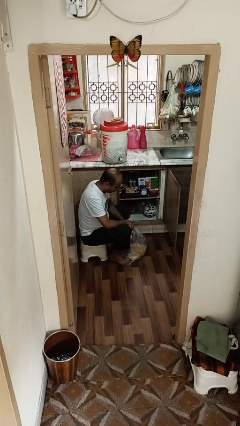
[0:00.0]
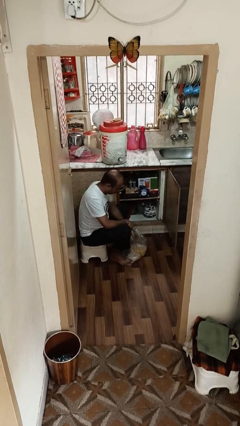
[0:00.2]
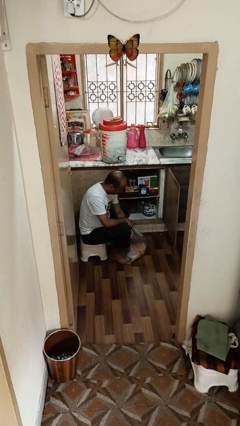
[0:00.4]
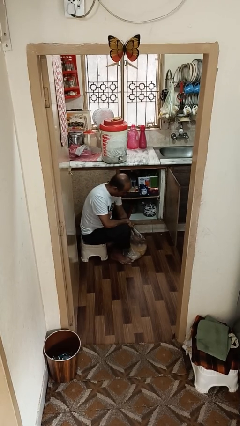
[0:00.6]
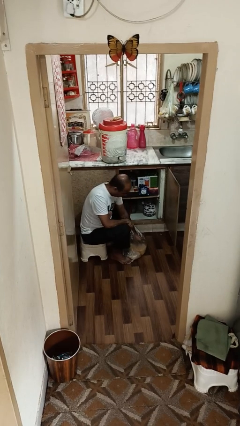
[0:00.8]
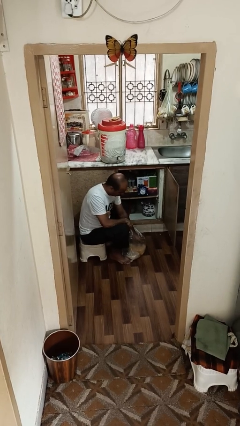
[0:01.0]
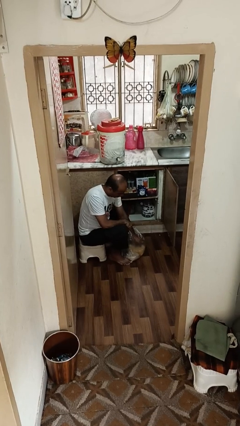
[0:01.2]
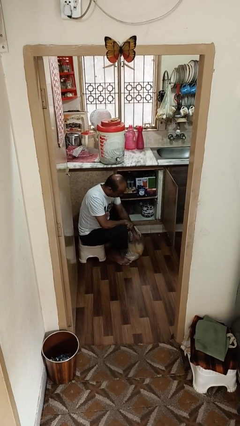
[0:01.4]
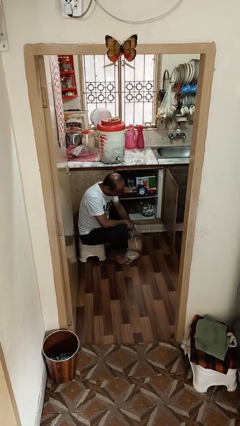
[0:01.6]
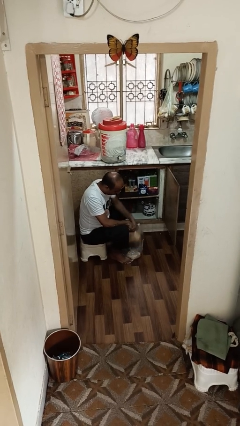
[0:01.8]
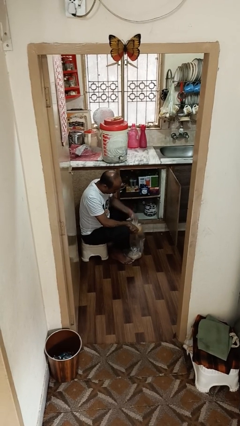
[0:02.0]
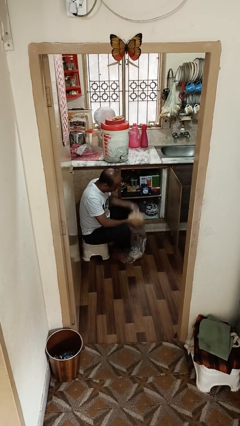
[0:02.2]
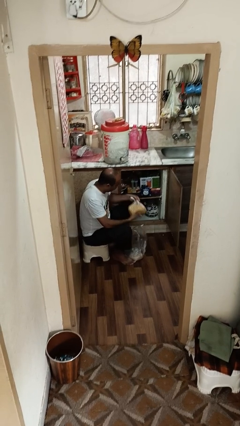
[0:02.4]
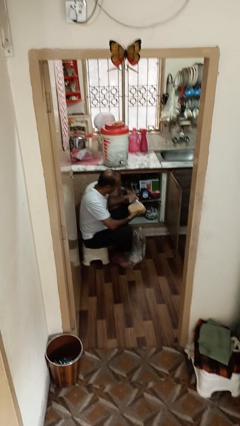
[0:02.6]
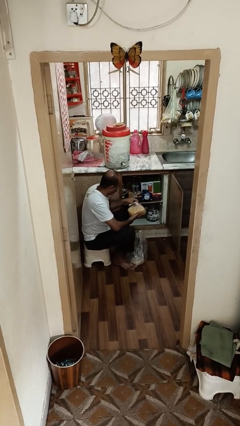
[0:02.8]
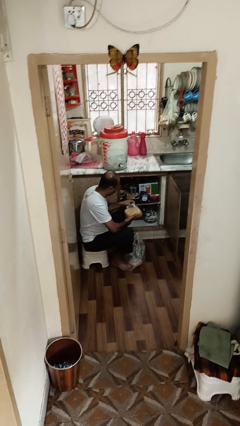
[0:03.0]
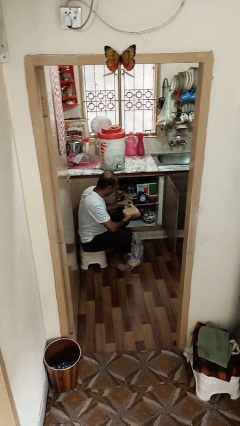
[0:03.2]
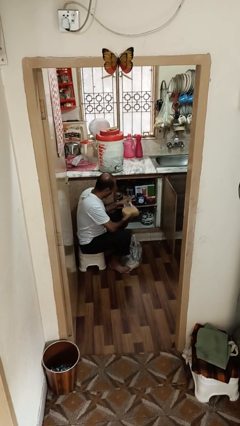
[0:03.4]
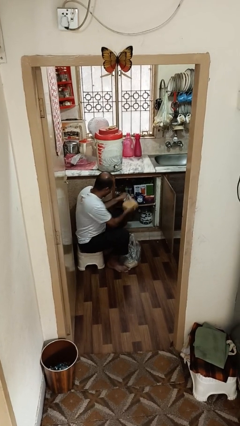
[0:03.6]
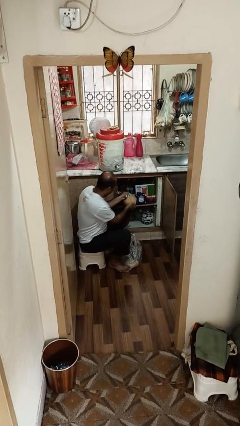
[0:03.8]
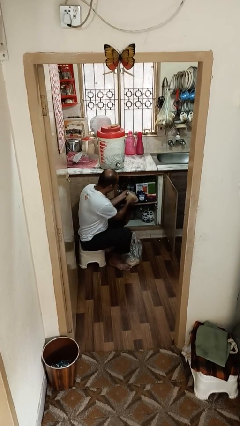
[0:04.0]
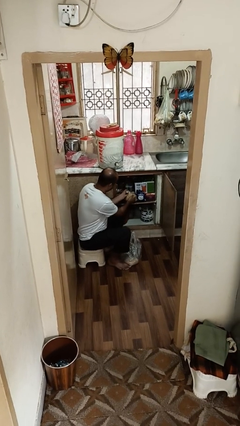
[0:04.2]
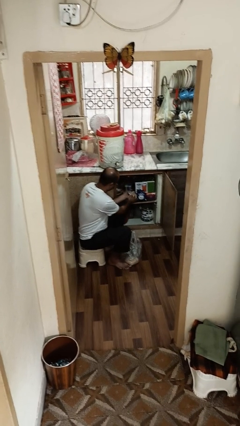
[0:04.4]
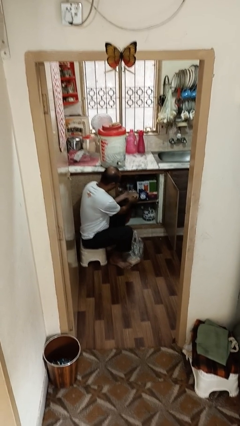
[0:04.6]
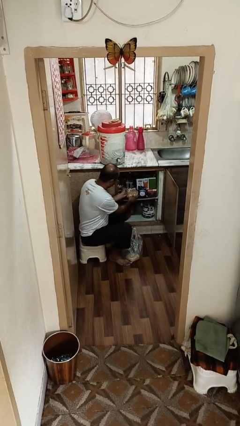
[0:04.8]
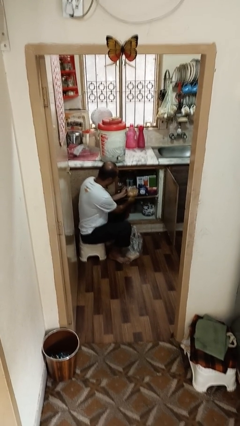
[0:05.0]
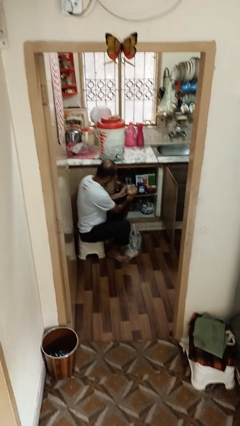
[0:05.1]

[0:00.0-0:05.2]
person loads groceries into cabinet

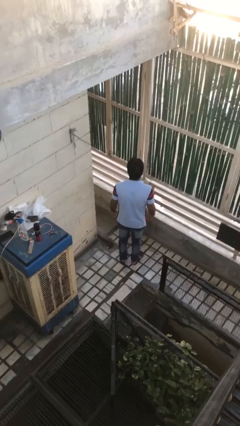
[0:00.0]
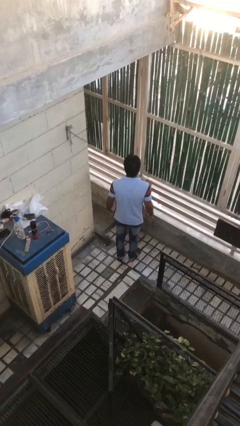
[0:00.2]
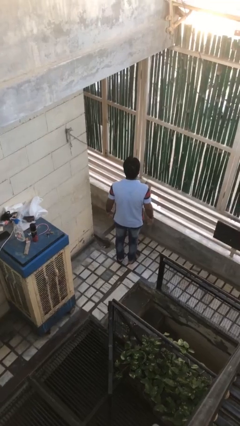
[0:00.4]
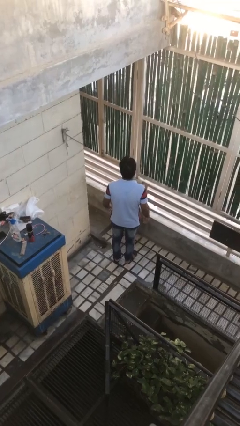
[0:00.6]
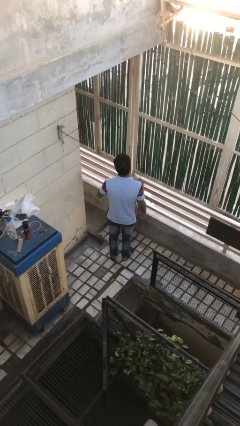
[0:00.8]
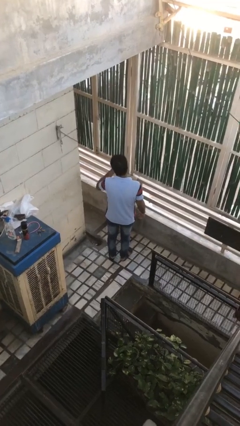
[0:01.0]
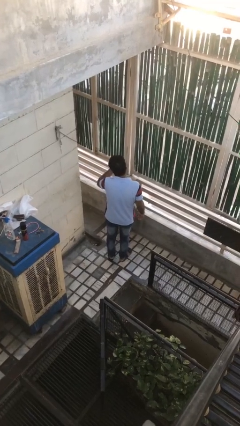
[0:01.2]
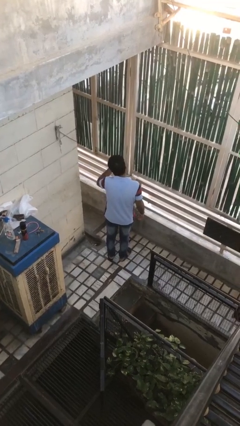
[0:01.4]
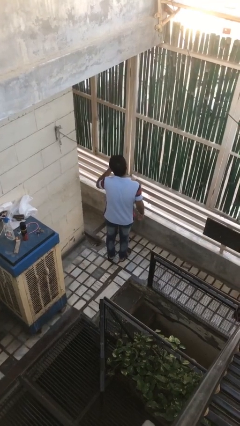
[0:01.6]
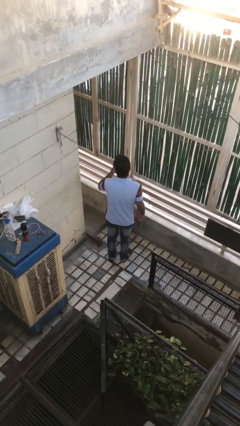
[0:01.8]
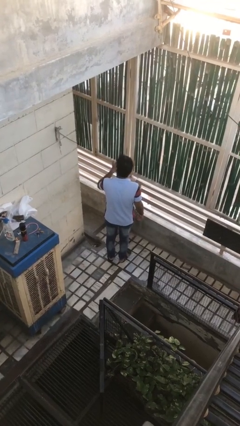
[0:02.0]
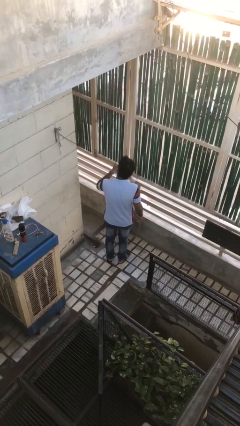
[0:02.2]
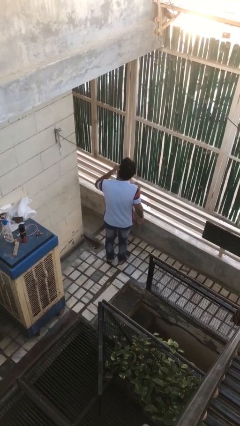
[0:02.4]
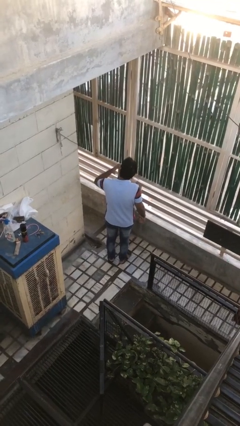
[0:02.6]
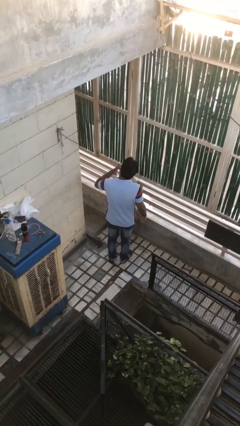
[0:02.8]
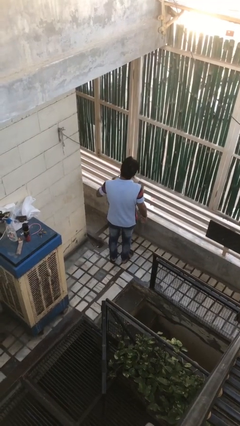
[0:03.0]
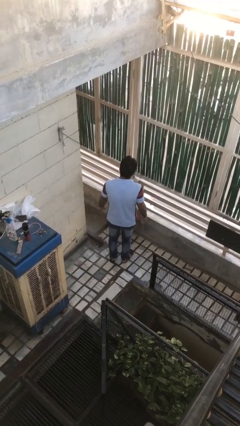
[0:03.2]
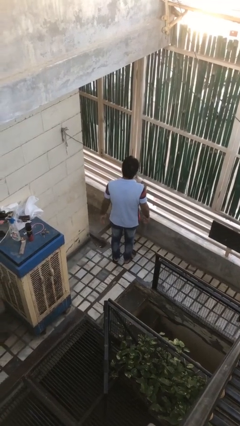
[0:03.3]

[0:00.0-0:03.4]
person licks fingers

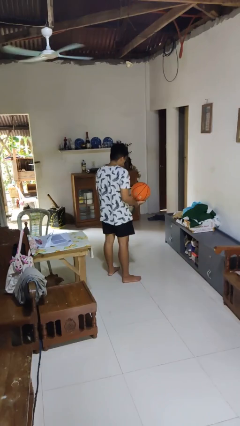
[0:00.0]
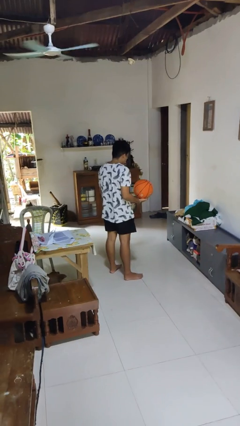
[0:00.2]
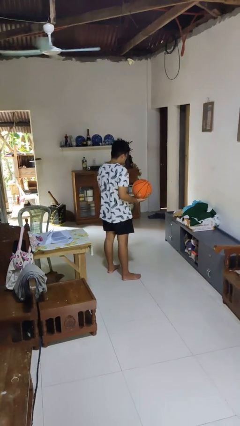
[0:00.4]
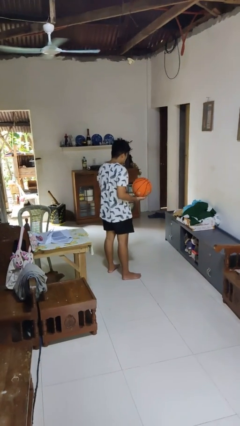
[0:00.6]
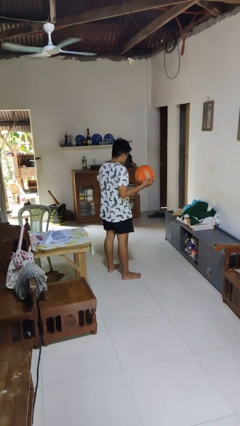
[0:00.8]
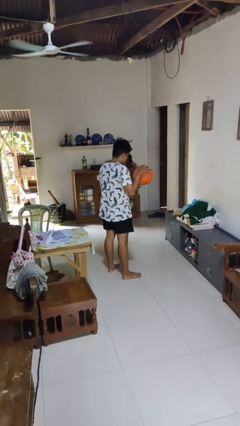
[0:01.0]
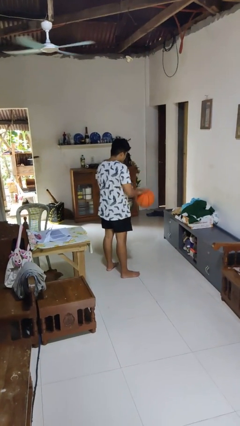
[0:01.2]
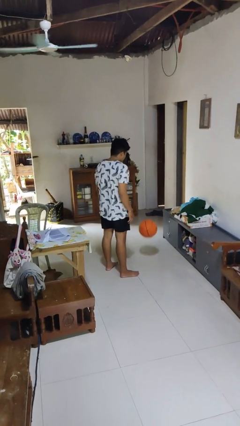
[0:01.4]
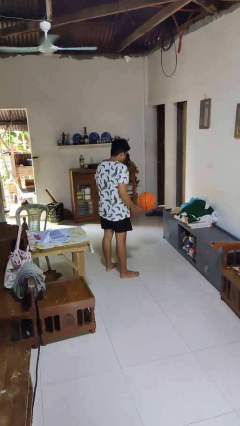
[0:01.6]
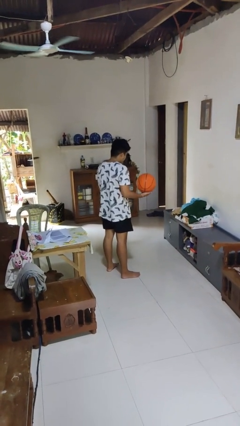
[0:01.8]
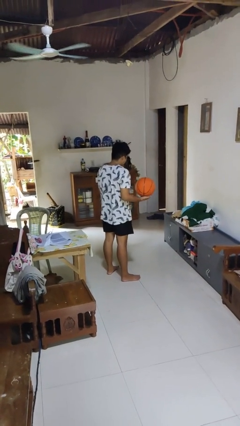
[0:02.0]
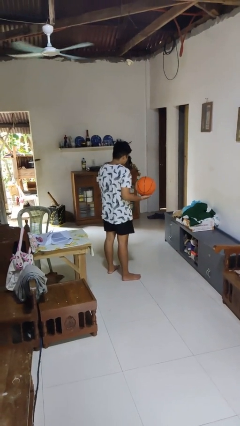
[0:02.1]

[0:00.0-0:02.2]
person bounces ball on floor

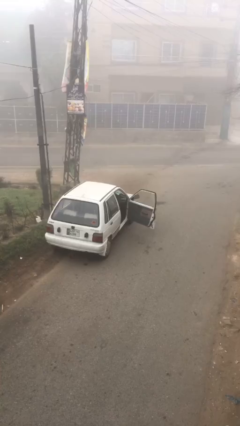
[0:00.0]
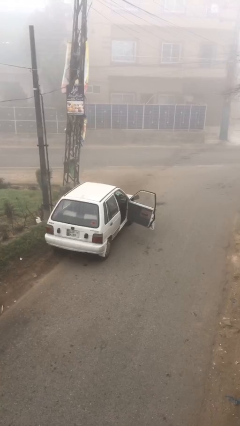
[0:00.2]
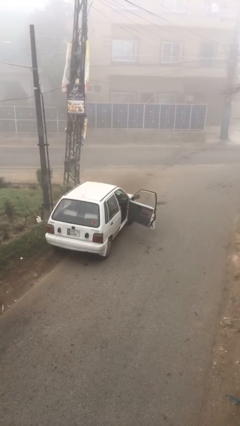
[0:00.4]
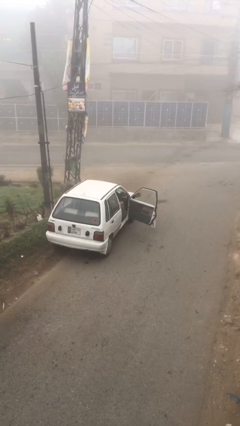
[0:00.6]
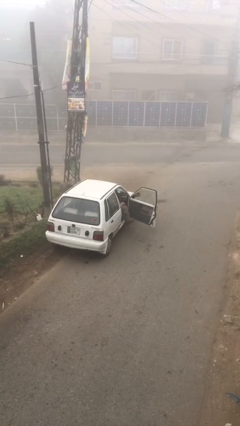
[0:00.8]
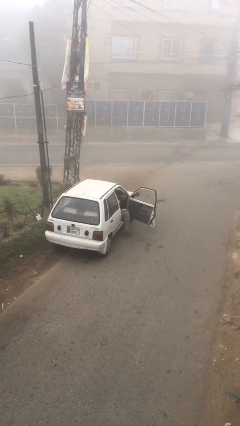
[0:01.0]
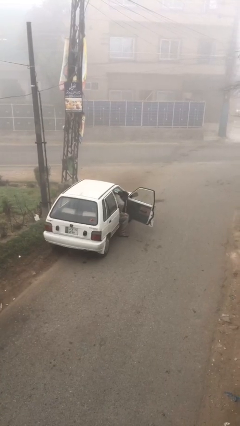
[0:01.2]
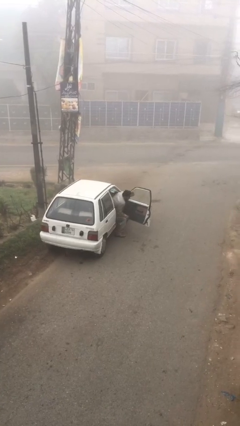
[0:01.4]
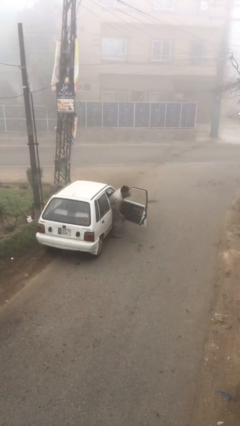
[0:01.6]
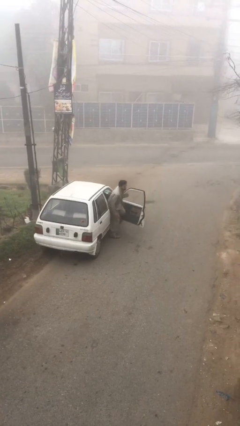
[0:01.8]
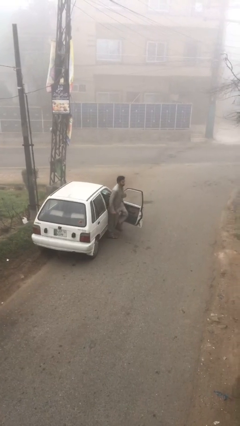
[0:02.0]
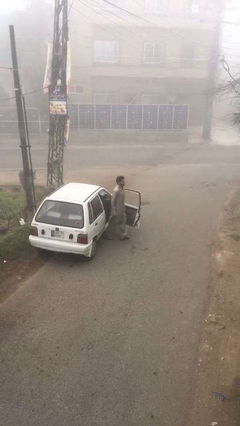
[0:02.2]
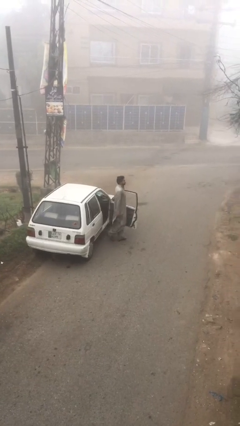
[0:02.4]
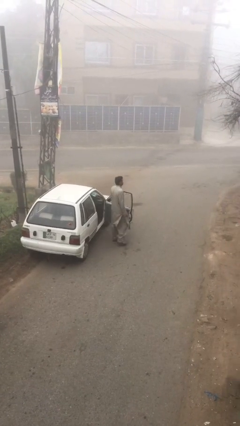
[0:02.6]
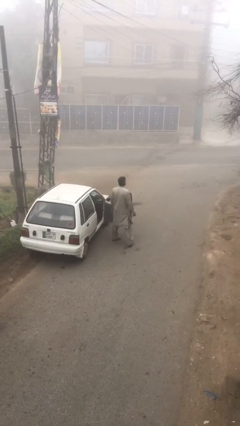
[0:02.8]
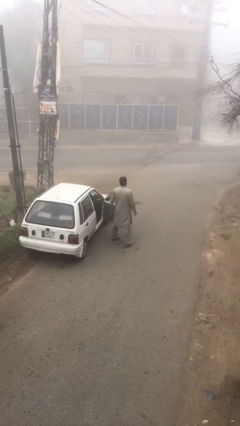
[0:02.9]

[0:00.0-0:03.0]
person exits car

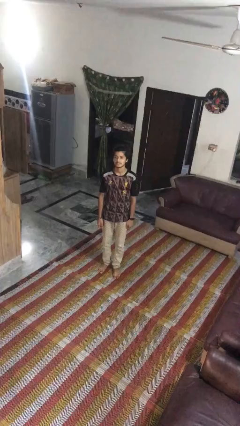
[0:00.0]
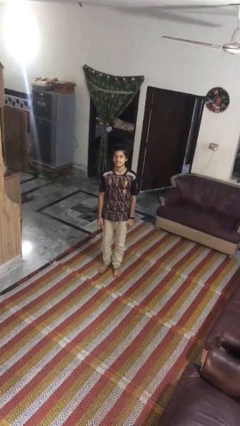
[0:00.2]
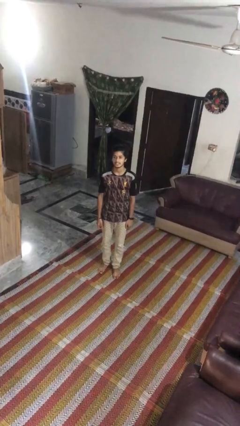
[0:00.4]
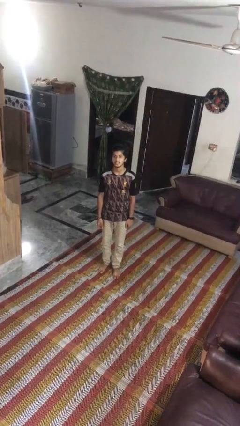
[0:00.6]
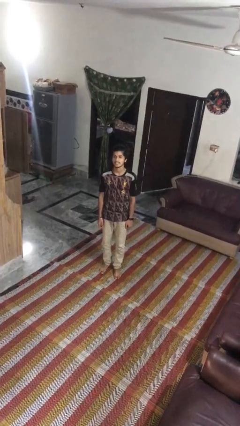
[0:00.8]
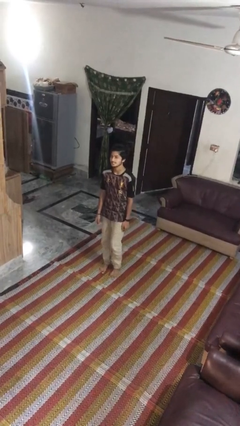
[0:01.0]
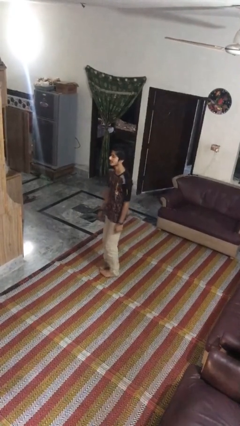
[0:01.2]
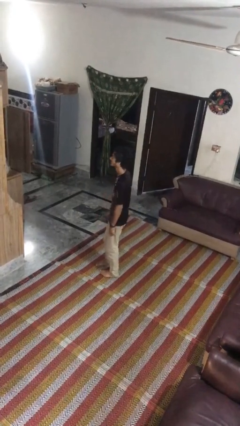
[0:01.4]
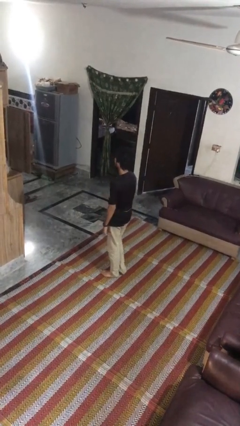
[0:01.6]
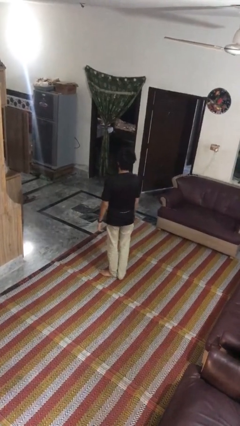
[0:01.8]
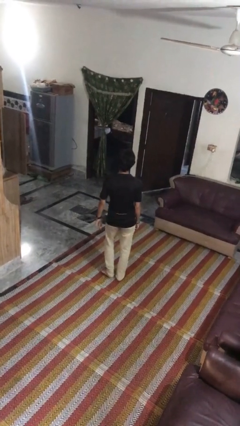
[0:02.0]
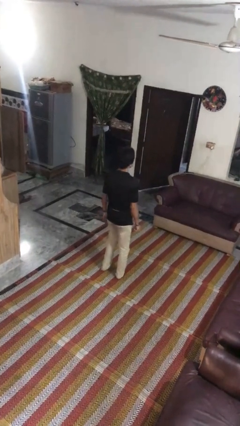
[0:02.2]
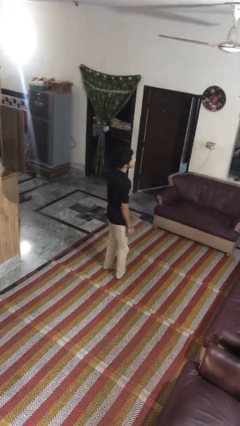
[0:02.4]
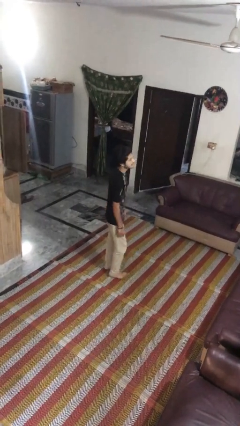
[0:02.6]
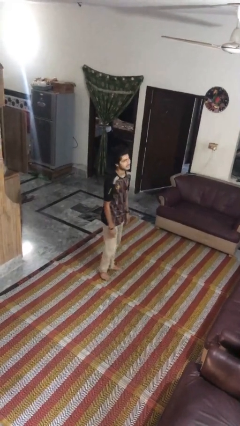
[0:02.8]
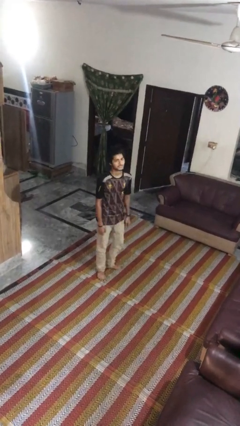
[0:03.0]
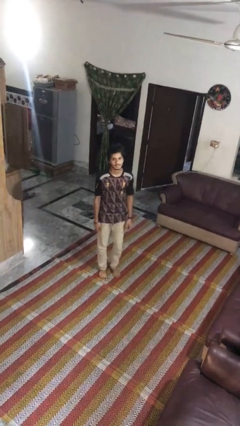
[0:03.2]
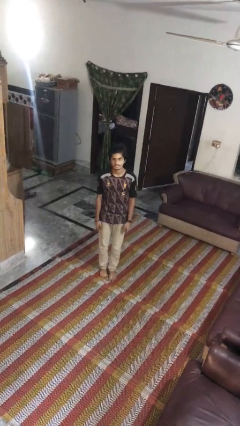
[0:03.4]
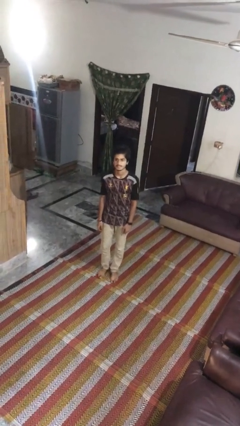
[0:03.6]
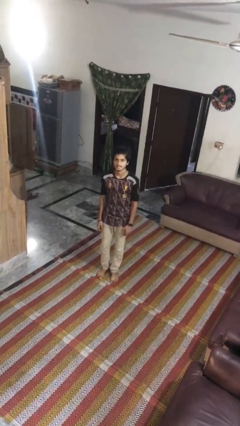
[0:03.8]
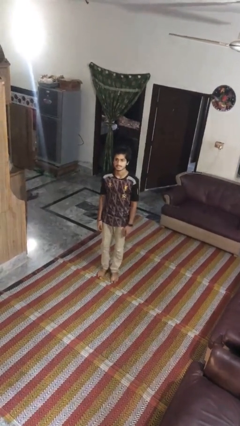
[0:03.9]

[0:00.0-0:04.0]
person twirls
